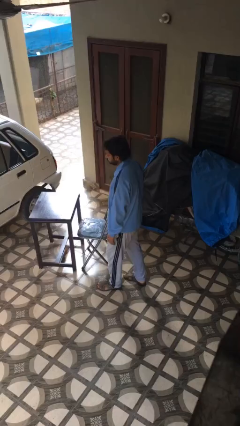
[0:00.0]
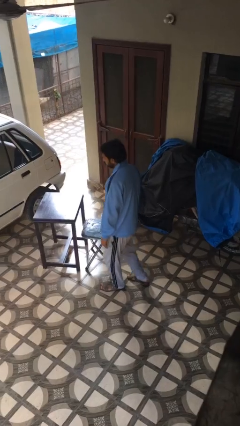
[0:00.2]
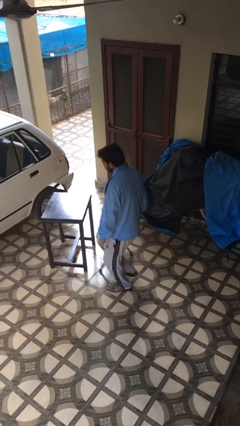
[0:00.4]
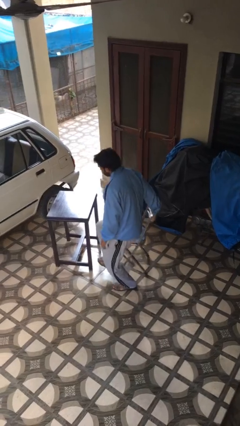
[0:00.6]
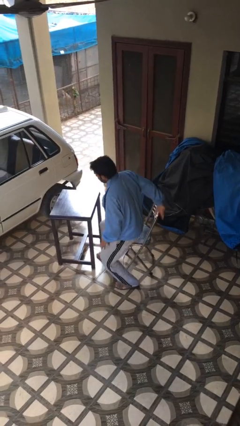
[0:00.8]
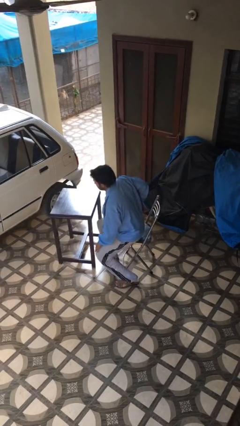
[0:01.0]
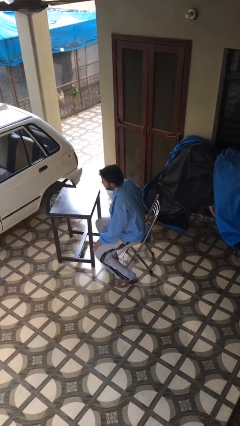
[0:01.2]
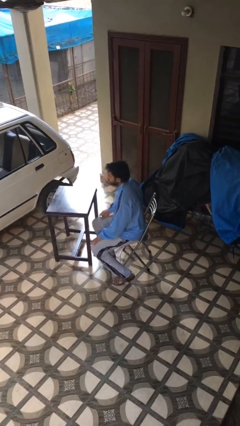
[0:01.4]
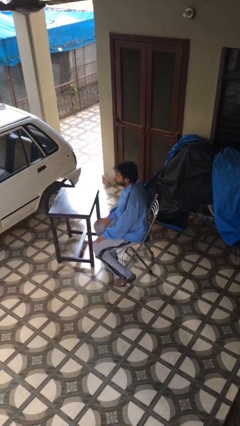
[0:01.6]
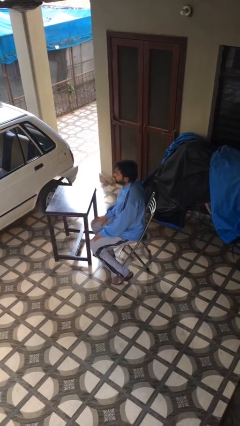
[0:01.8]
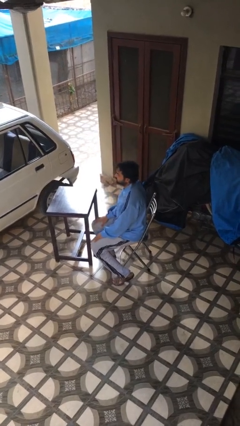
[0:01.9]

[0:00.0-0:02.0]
person sits down

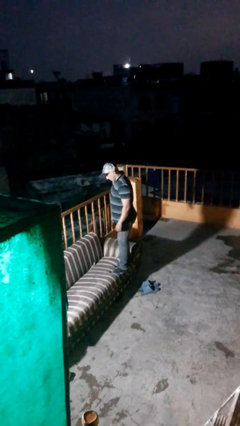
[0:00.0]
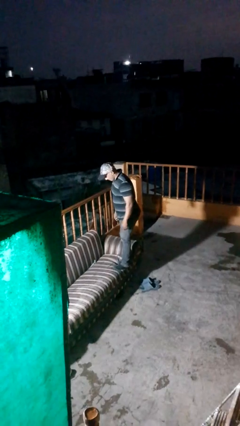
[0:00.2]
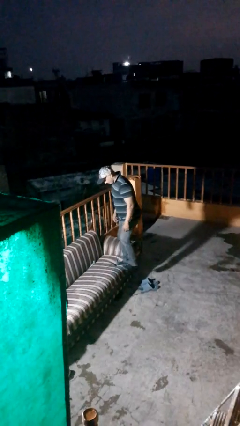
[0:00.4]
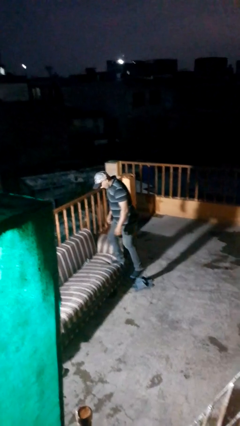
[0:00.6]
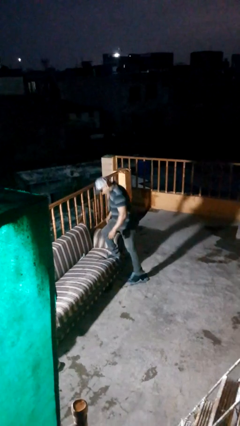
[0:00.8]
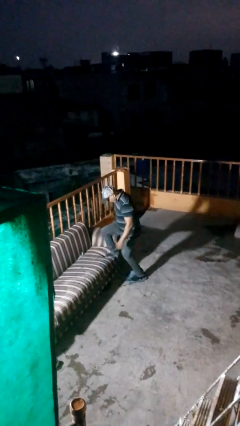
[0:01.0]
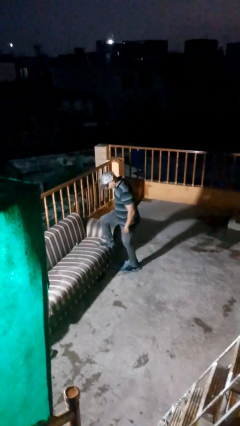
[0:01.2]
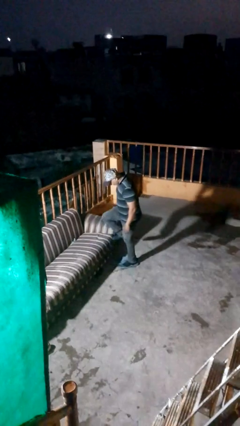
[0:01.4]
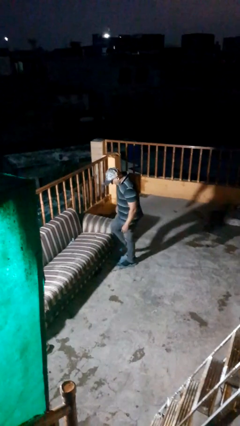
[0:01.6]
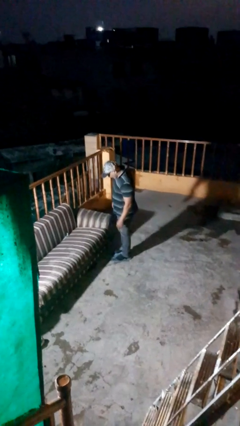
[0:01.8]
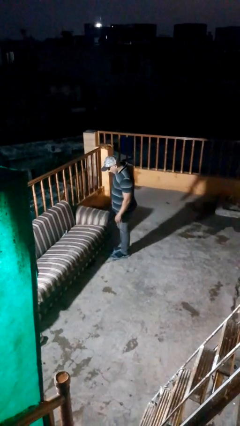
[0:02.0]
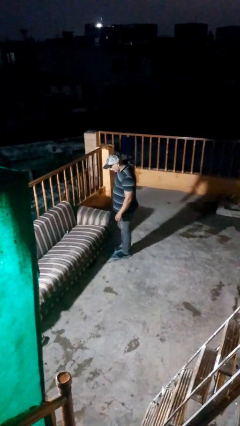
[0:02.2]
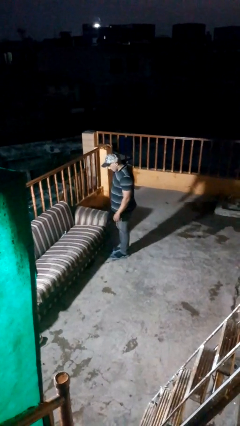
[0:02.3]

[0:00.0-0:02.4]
person climbs off couch

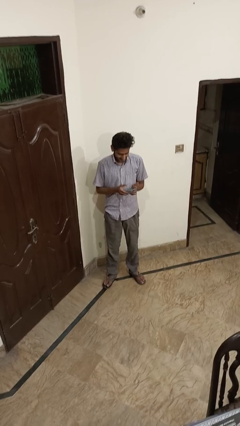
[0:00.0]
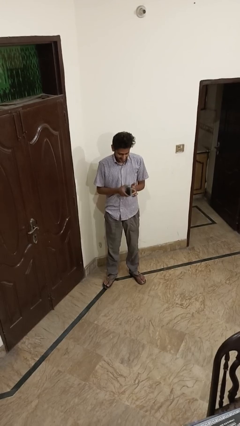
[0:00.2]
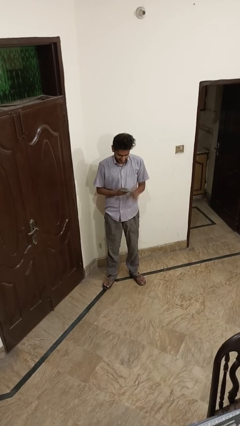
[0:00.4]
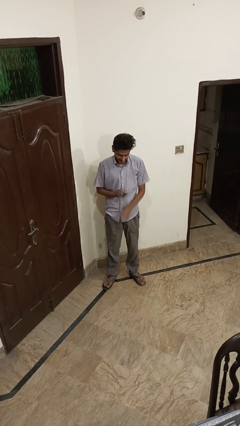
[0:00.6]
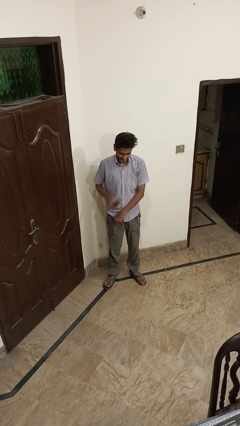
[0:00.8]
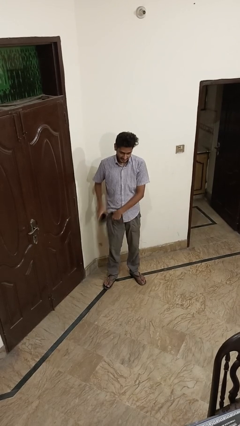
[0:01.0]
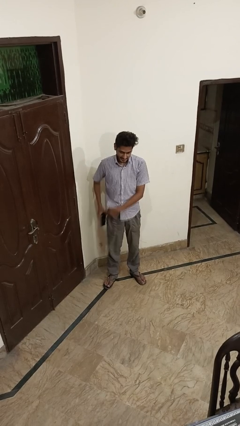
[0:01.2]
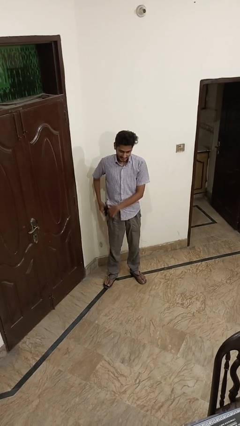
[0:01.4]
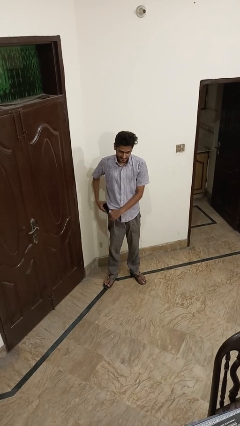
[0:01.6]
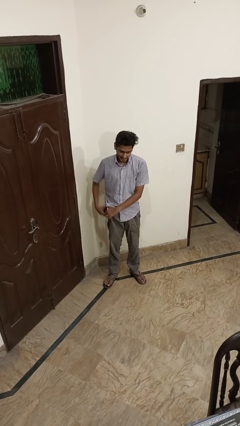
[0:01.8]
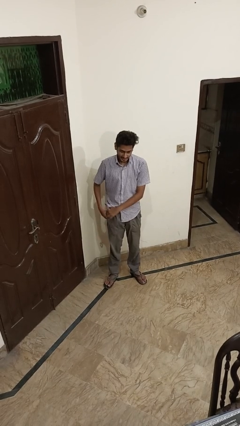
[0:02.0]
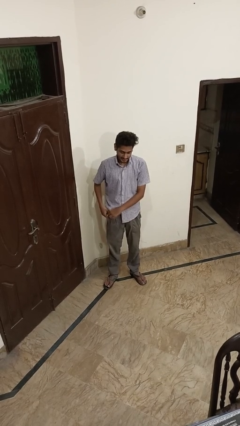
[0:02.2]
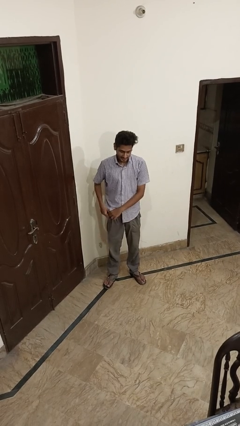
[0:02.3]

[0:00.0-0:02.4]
person puts phone into pocket

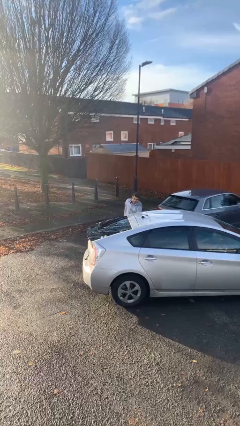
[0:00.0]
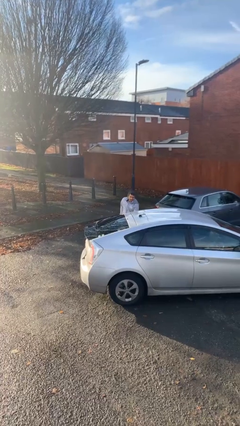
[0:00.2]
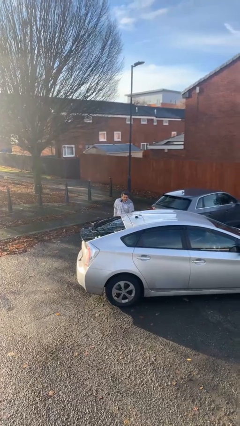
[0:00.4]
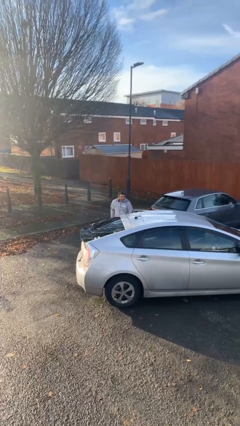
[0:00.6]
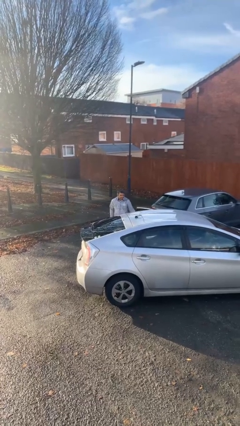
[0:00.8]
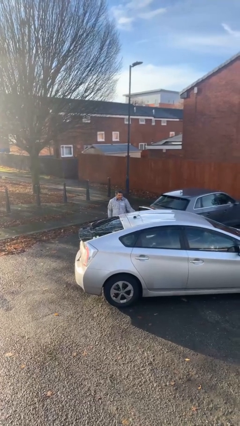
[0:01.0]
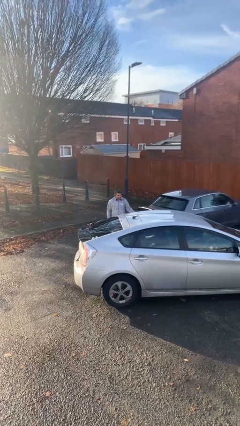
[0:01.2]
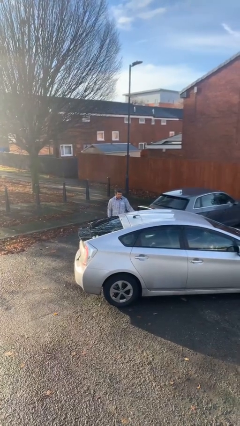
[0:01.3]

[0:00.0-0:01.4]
person opens car door

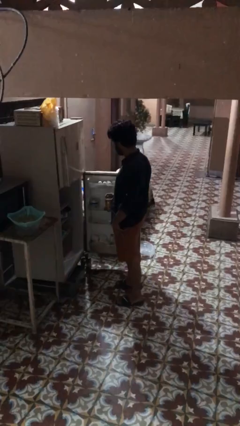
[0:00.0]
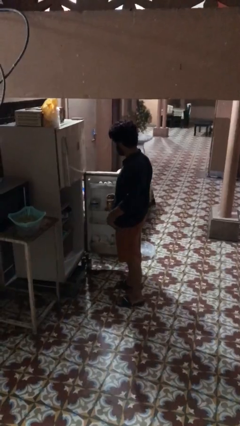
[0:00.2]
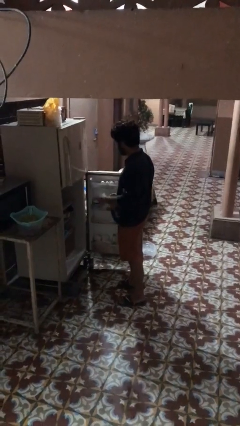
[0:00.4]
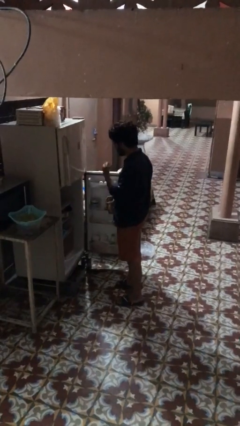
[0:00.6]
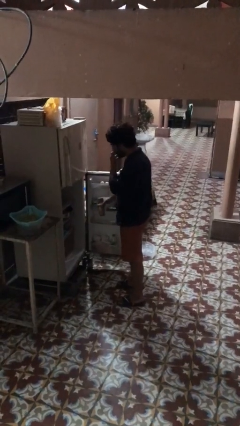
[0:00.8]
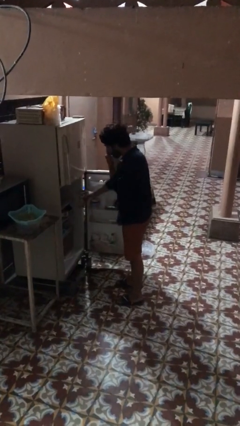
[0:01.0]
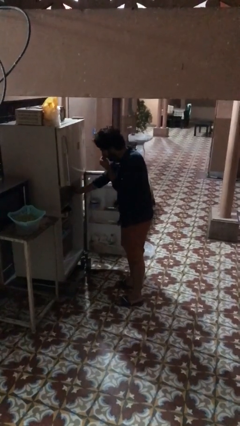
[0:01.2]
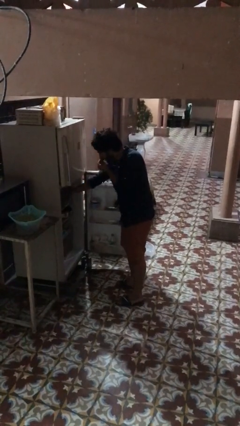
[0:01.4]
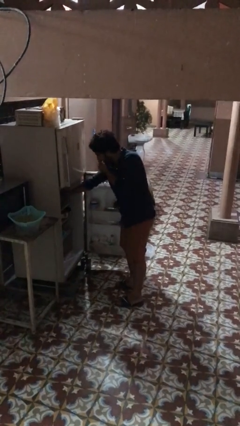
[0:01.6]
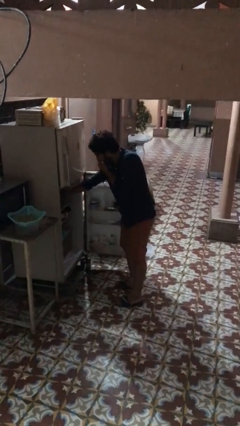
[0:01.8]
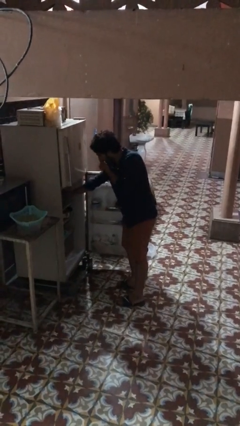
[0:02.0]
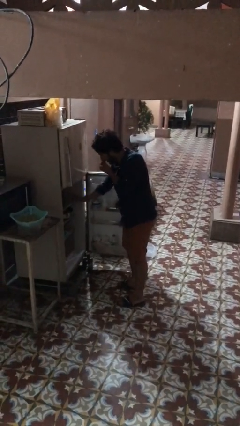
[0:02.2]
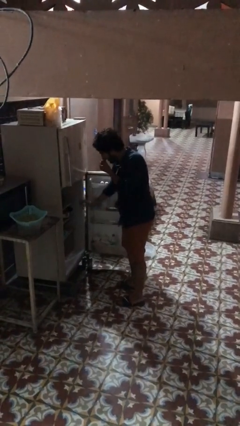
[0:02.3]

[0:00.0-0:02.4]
person puts object into refrigerator

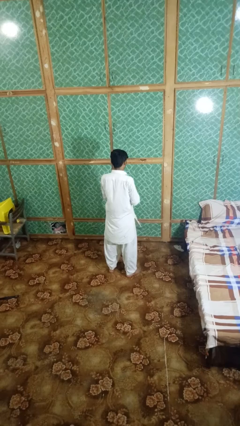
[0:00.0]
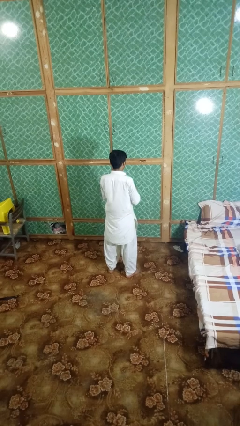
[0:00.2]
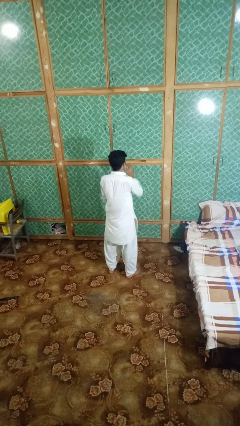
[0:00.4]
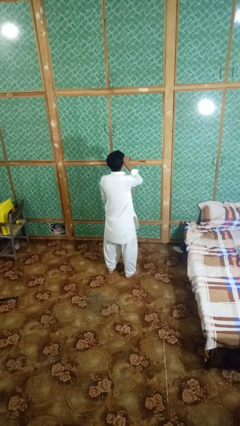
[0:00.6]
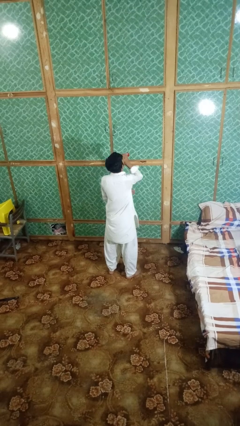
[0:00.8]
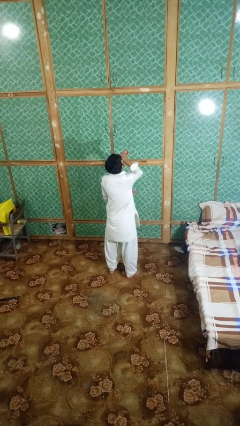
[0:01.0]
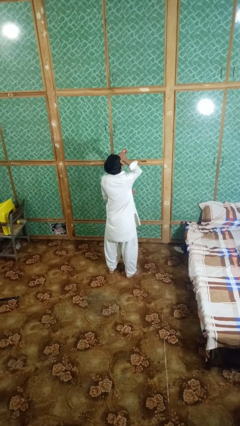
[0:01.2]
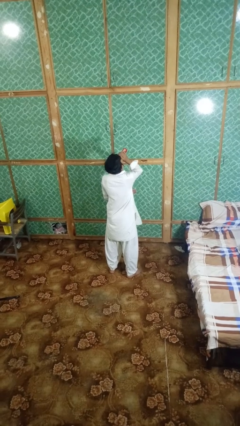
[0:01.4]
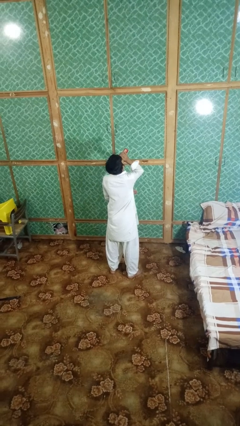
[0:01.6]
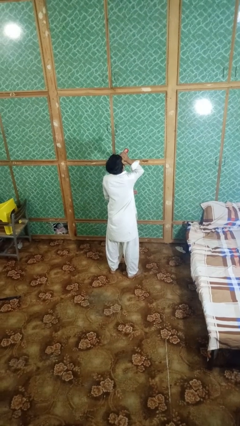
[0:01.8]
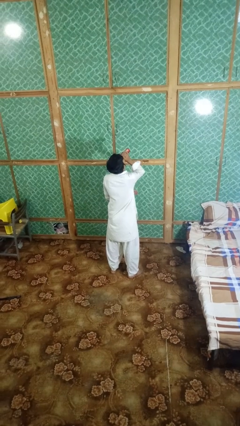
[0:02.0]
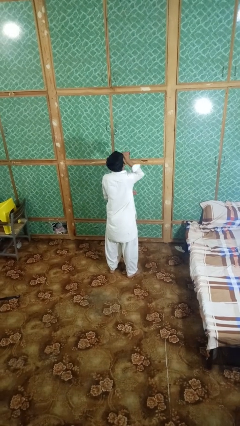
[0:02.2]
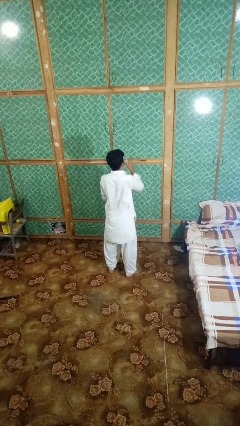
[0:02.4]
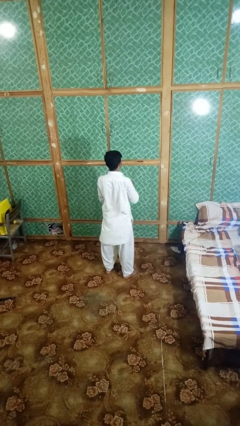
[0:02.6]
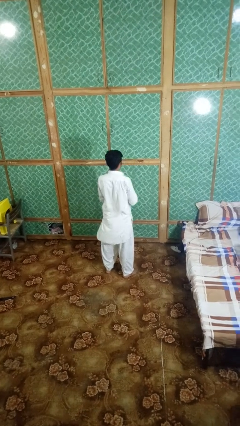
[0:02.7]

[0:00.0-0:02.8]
person drinks from beverage can

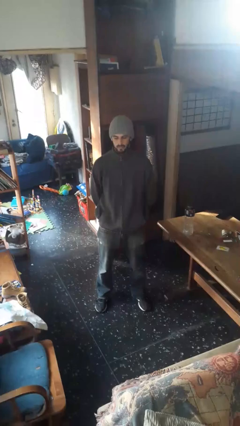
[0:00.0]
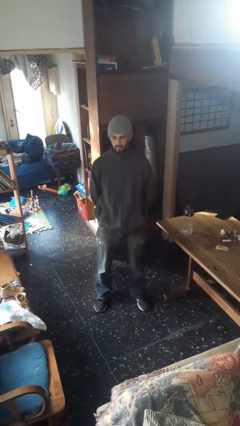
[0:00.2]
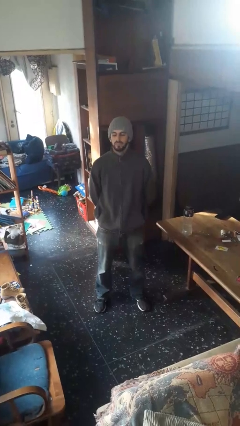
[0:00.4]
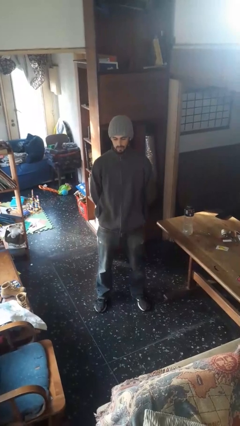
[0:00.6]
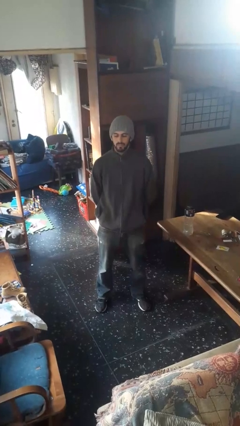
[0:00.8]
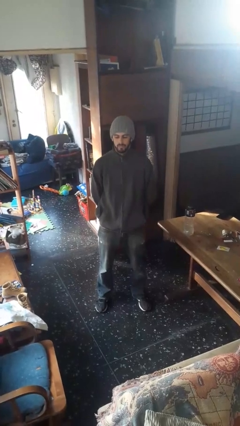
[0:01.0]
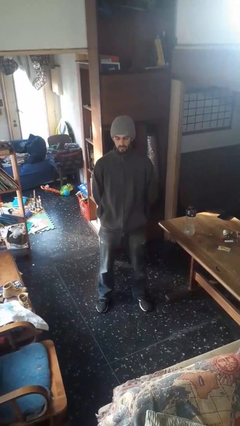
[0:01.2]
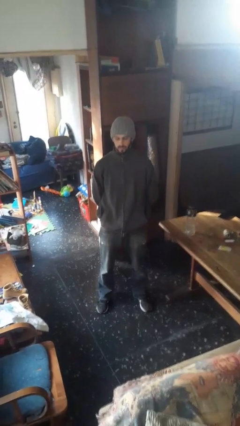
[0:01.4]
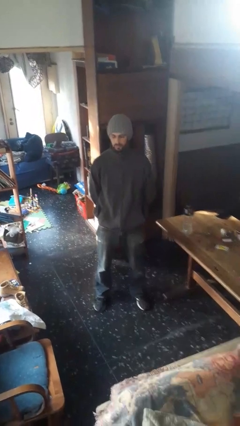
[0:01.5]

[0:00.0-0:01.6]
person nods head

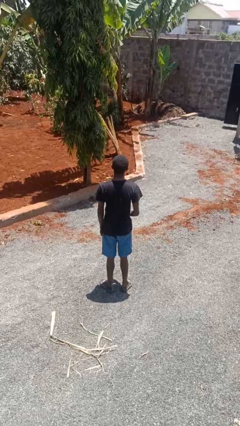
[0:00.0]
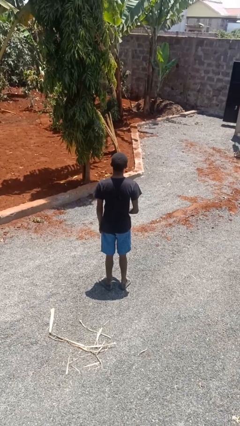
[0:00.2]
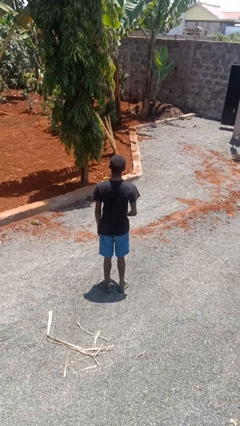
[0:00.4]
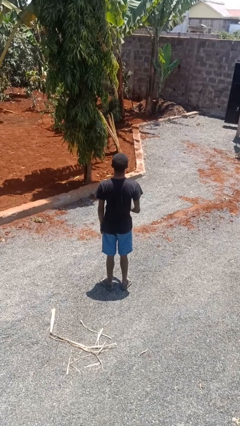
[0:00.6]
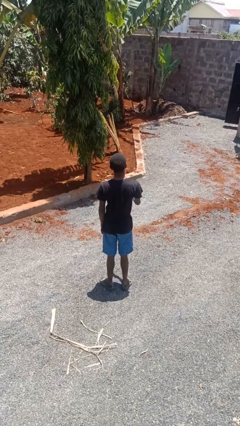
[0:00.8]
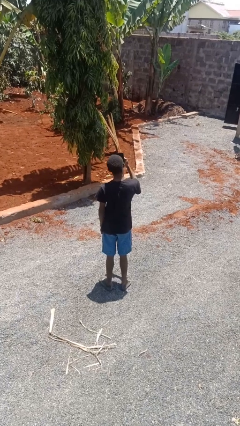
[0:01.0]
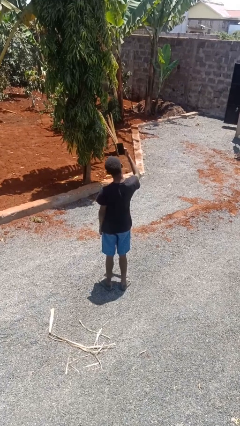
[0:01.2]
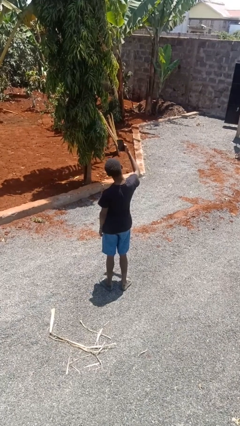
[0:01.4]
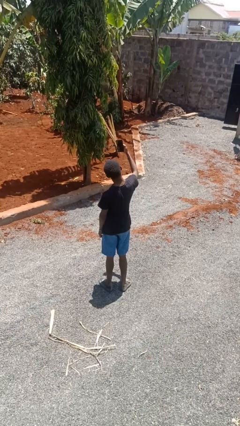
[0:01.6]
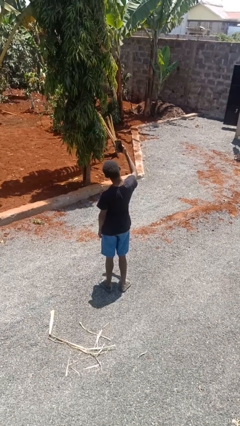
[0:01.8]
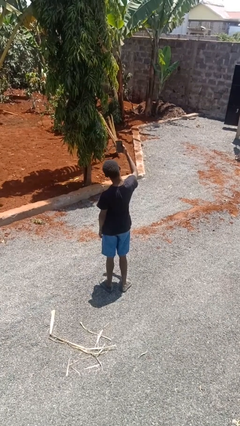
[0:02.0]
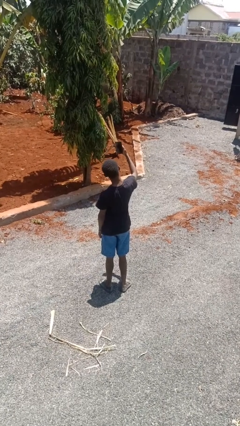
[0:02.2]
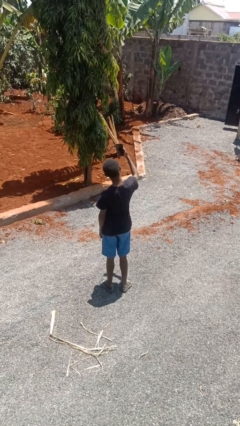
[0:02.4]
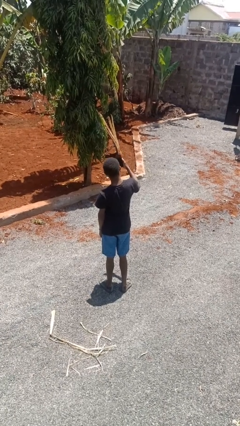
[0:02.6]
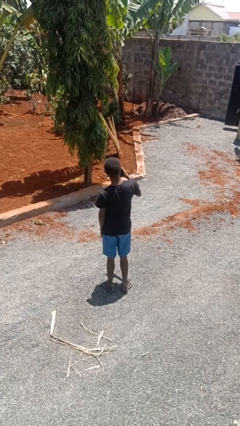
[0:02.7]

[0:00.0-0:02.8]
person takes selfie
